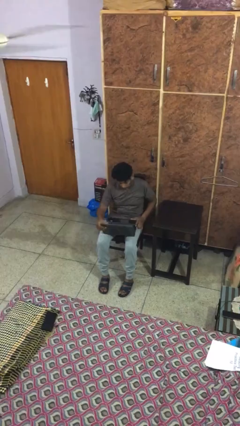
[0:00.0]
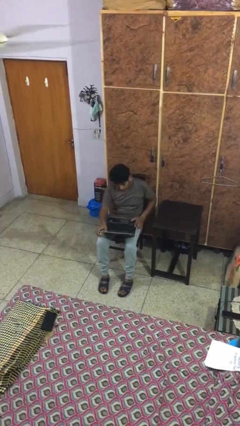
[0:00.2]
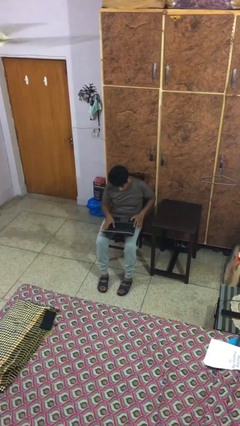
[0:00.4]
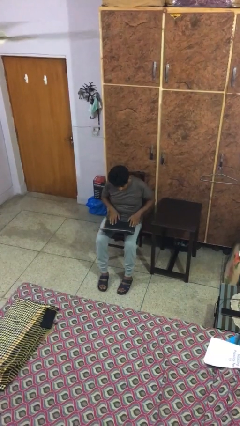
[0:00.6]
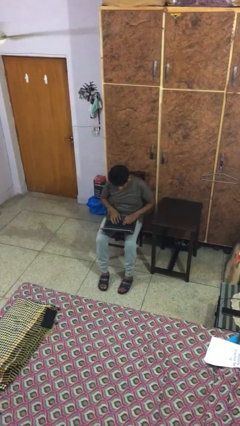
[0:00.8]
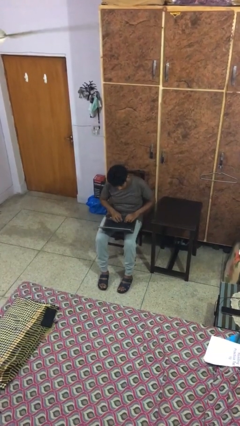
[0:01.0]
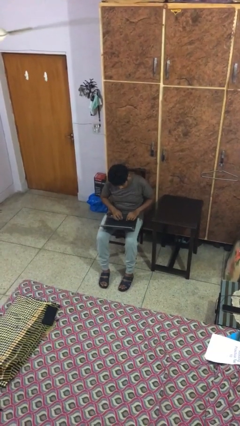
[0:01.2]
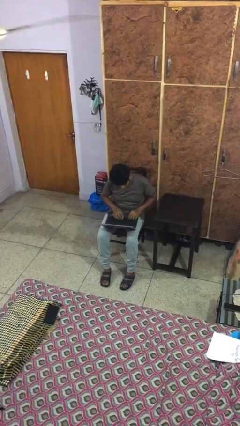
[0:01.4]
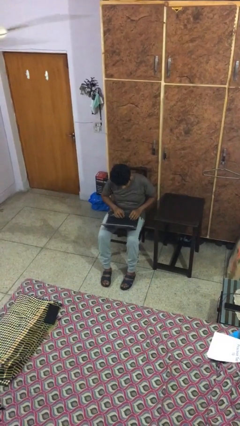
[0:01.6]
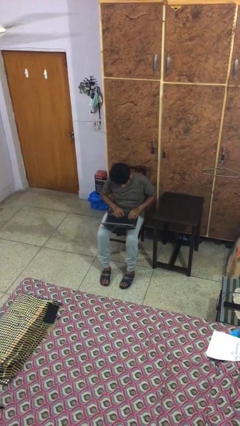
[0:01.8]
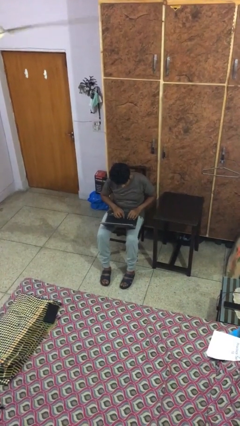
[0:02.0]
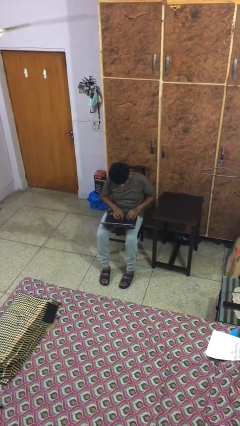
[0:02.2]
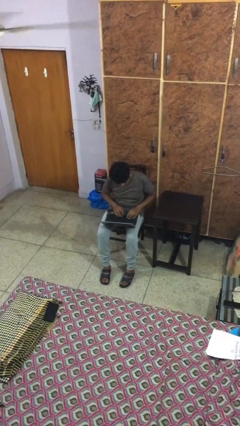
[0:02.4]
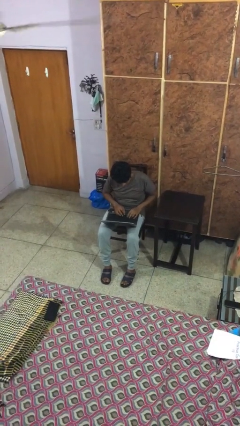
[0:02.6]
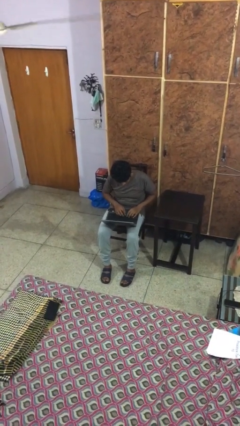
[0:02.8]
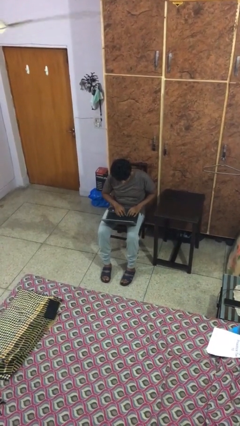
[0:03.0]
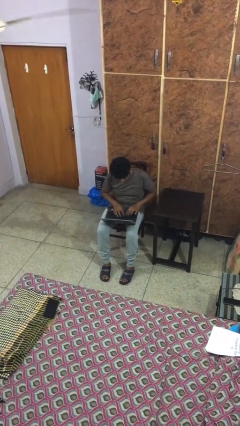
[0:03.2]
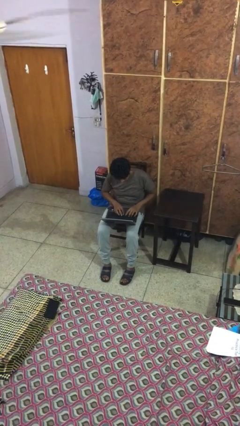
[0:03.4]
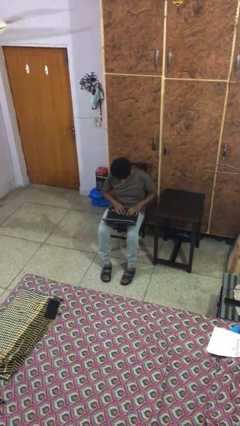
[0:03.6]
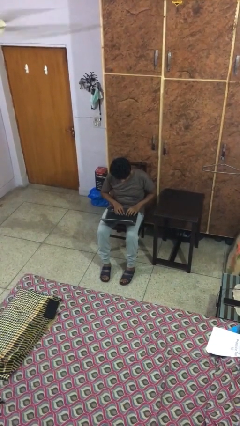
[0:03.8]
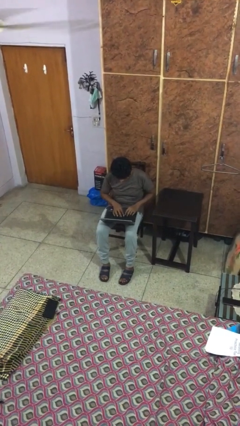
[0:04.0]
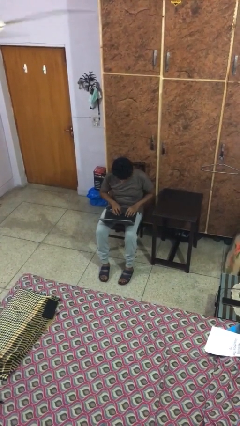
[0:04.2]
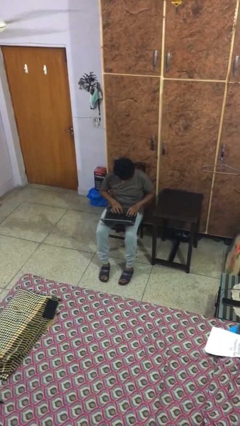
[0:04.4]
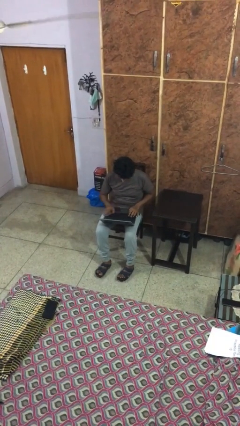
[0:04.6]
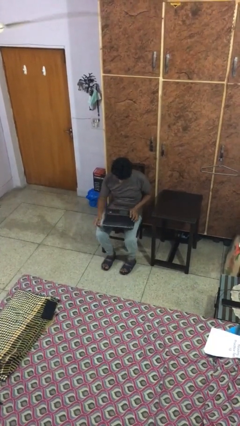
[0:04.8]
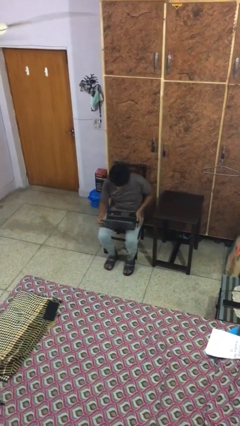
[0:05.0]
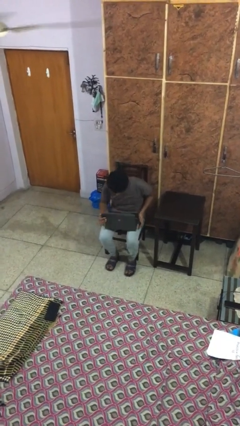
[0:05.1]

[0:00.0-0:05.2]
person interacts with laptop

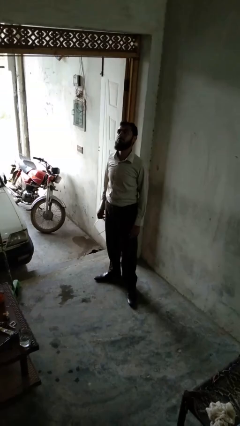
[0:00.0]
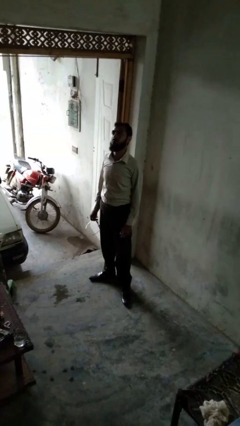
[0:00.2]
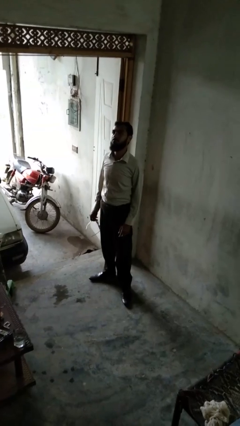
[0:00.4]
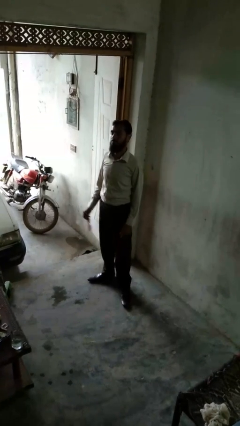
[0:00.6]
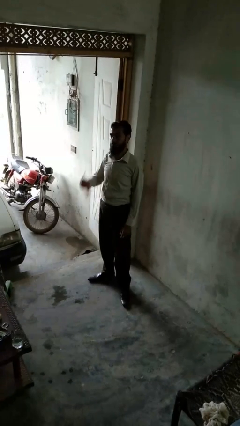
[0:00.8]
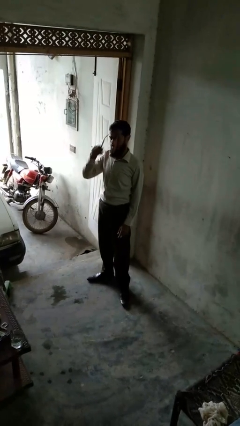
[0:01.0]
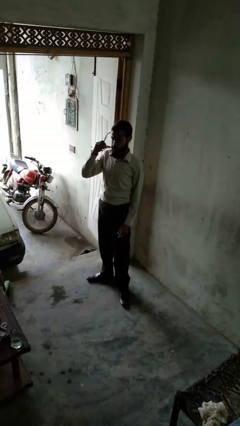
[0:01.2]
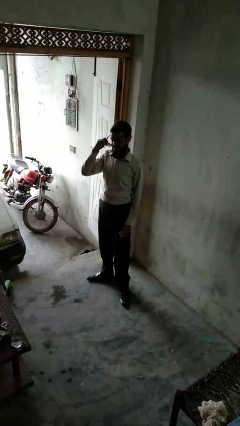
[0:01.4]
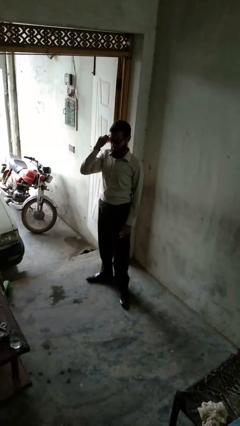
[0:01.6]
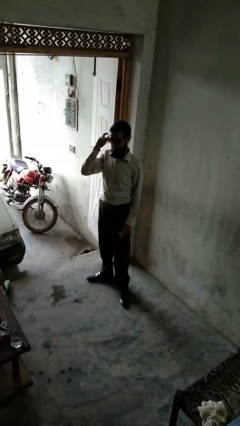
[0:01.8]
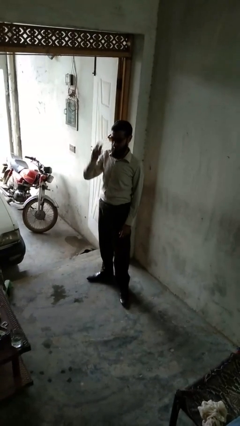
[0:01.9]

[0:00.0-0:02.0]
person puts on sunglasses

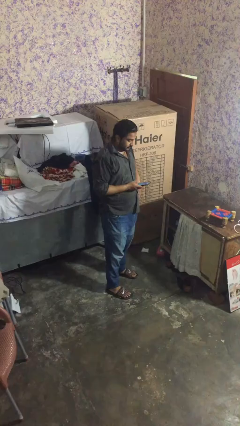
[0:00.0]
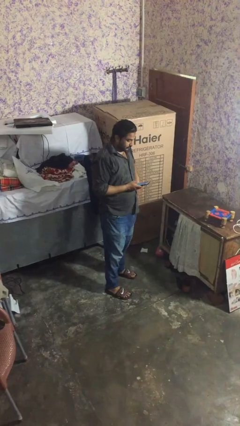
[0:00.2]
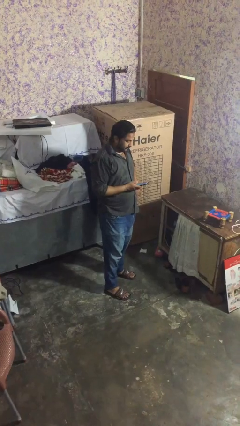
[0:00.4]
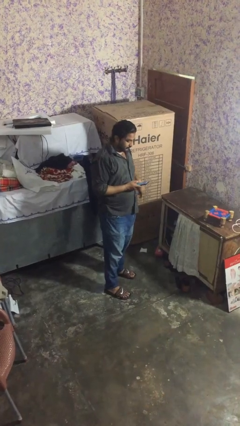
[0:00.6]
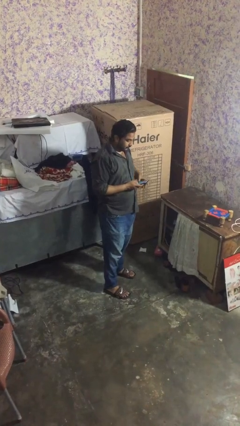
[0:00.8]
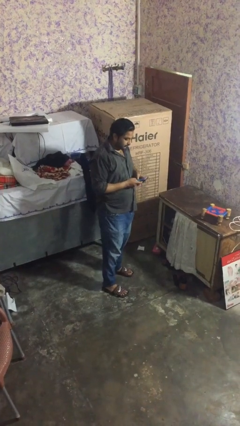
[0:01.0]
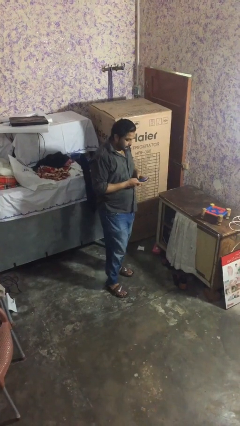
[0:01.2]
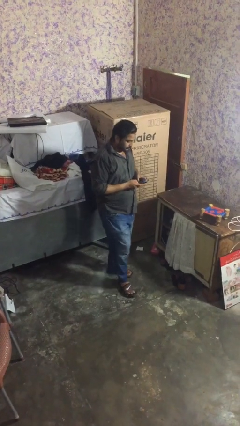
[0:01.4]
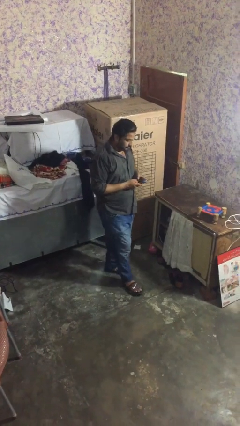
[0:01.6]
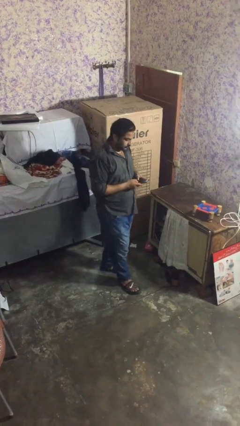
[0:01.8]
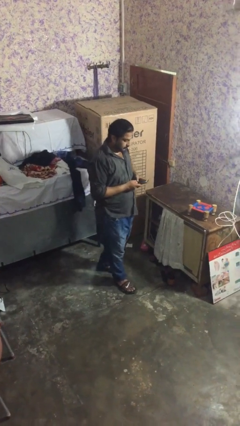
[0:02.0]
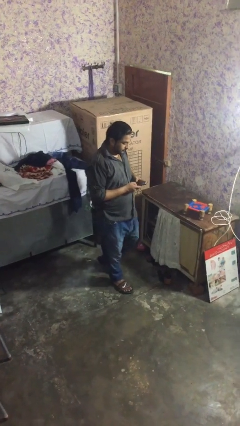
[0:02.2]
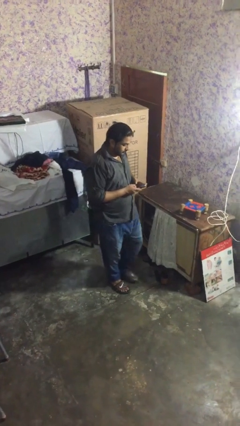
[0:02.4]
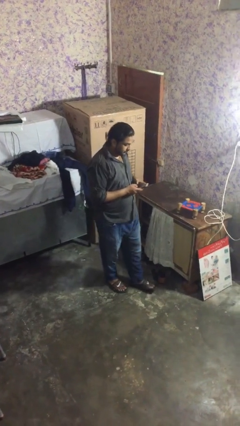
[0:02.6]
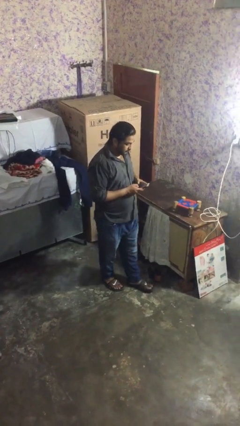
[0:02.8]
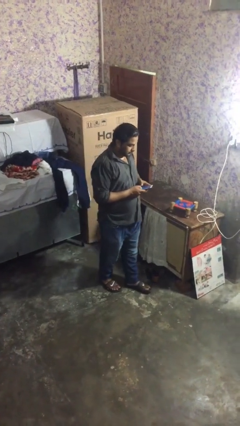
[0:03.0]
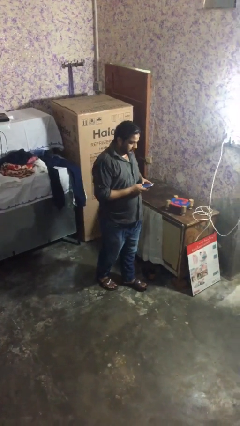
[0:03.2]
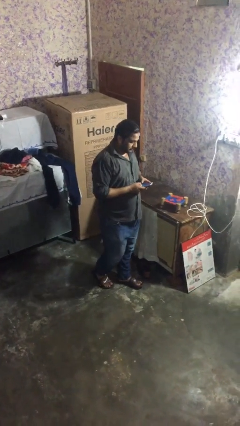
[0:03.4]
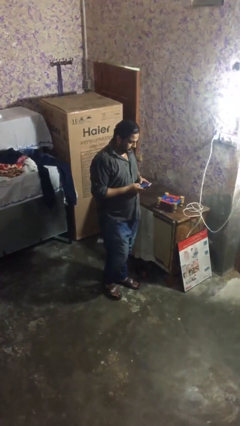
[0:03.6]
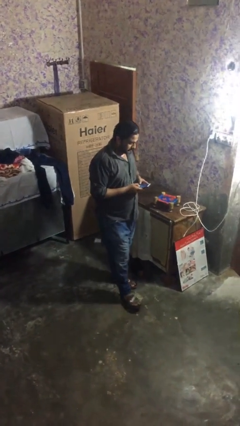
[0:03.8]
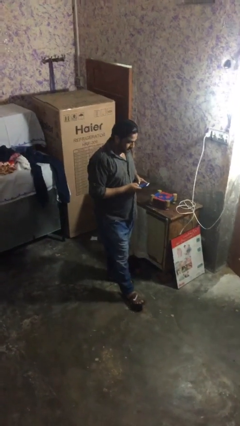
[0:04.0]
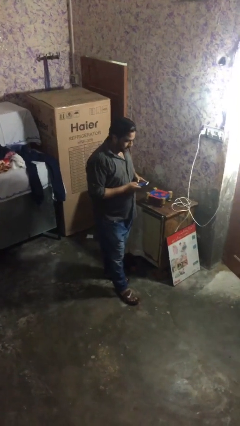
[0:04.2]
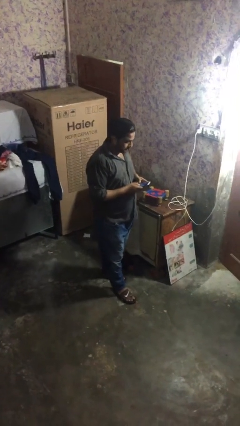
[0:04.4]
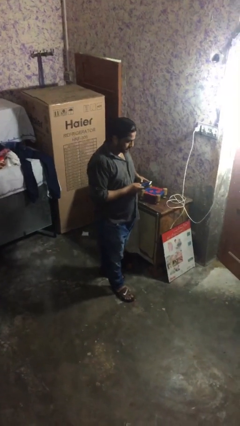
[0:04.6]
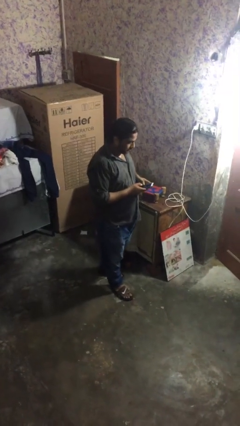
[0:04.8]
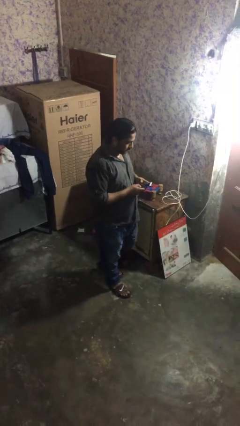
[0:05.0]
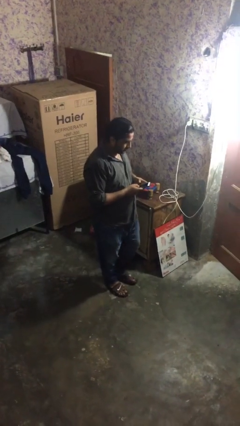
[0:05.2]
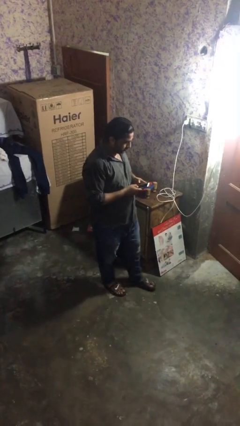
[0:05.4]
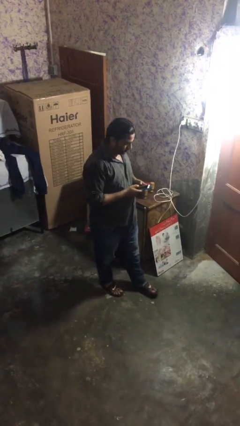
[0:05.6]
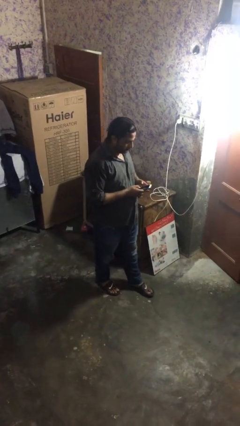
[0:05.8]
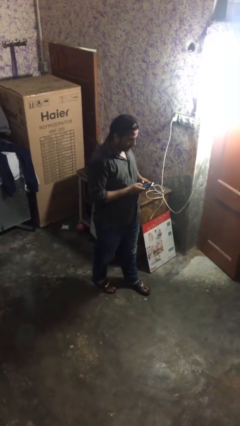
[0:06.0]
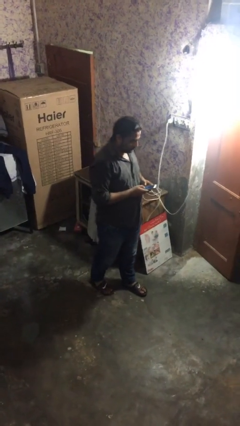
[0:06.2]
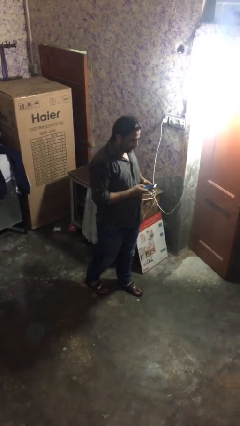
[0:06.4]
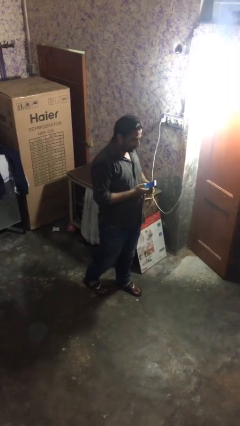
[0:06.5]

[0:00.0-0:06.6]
person texts on phone

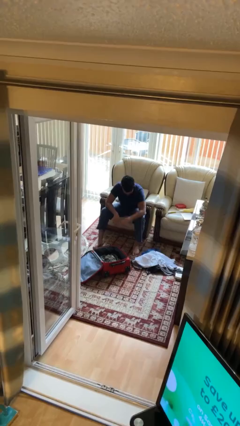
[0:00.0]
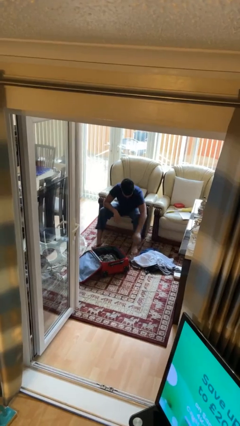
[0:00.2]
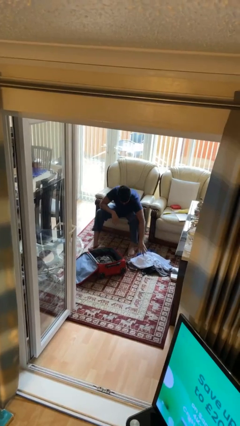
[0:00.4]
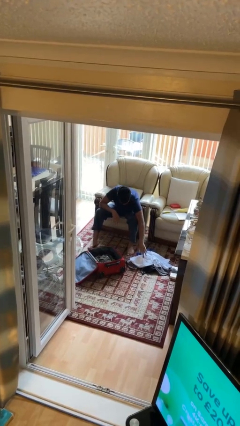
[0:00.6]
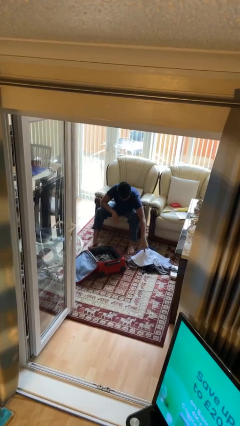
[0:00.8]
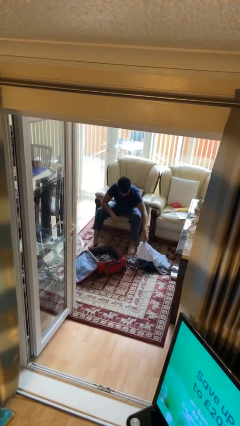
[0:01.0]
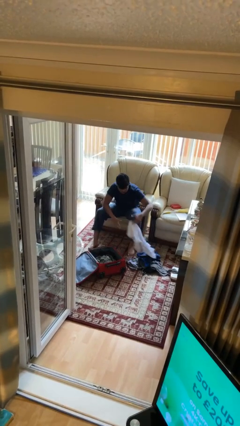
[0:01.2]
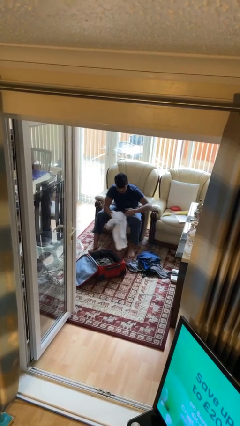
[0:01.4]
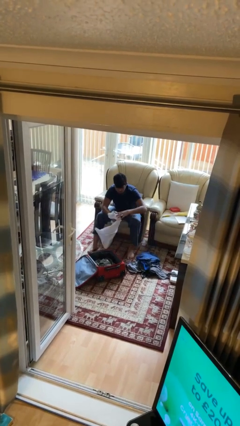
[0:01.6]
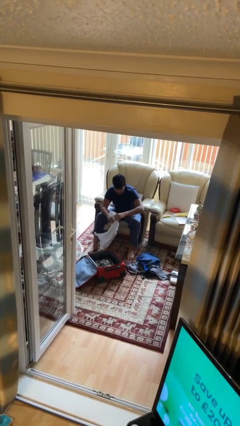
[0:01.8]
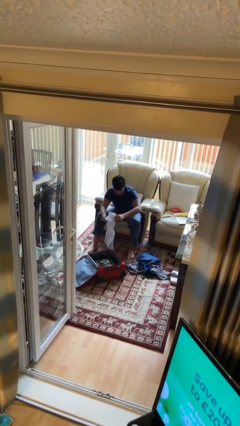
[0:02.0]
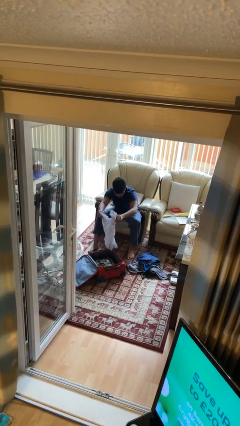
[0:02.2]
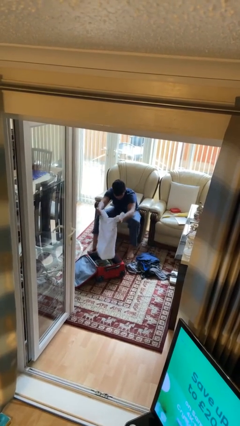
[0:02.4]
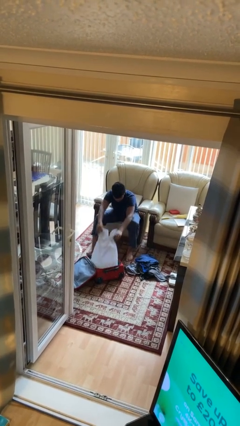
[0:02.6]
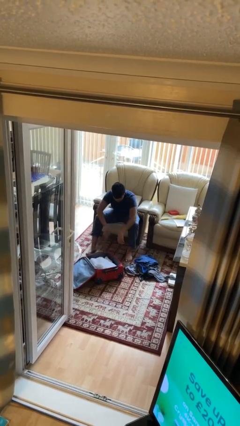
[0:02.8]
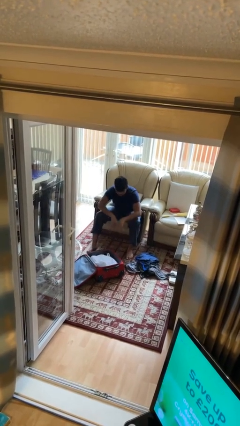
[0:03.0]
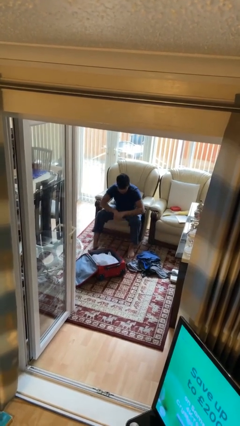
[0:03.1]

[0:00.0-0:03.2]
person loads clothes into suitcase

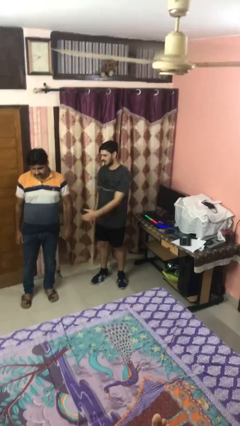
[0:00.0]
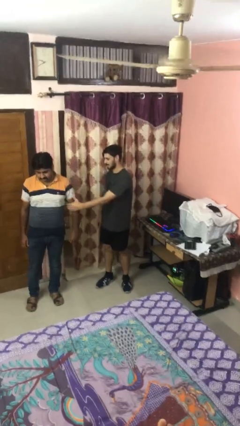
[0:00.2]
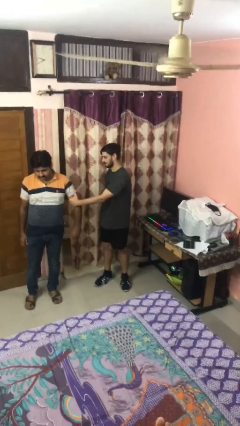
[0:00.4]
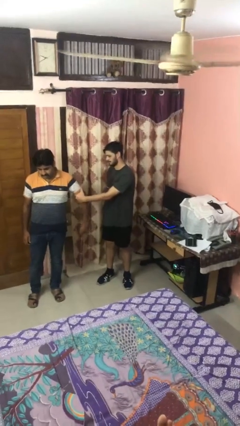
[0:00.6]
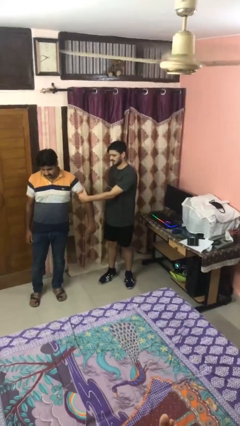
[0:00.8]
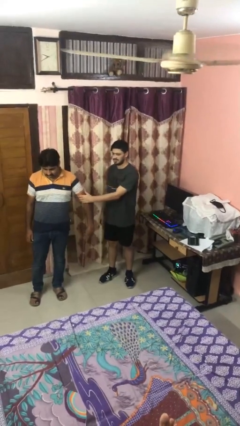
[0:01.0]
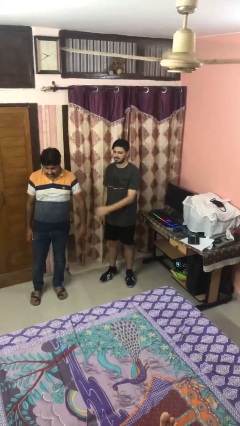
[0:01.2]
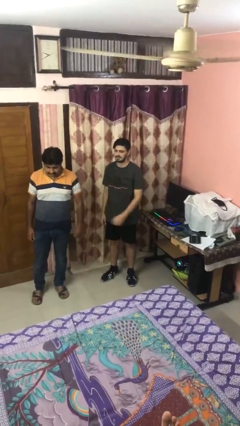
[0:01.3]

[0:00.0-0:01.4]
person grabs person by bicep
